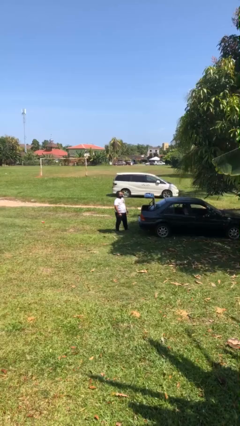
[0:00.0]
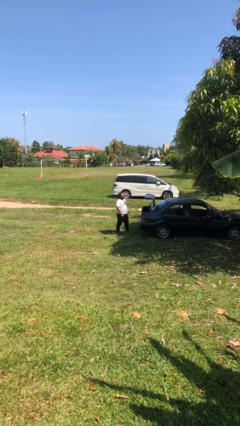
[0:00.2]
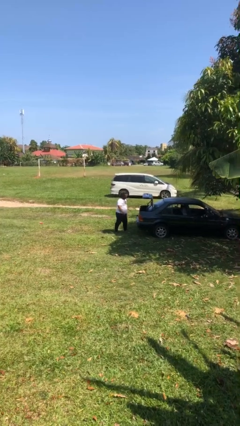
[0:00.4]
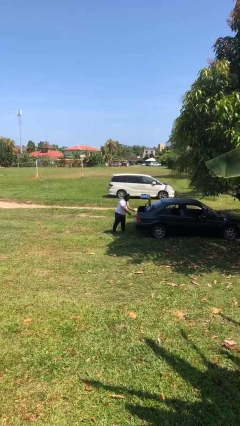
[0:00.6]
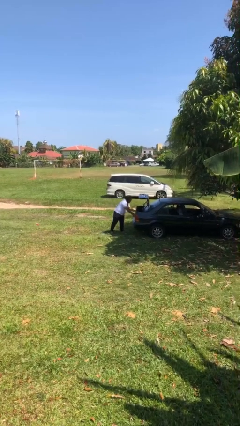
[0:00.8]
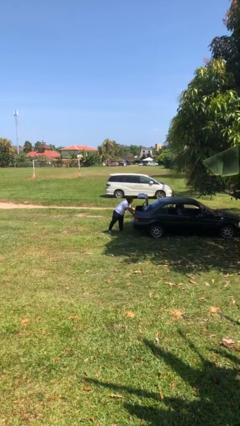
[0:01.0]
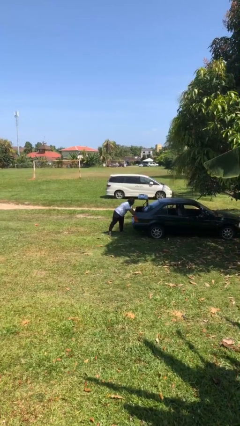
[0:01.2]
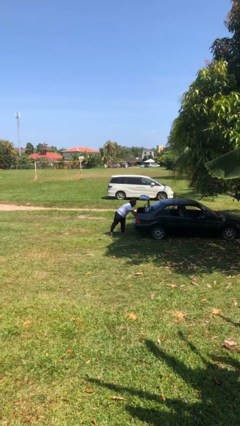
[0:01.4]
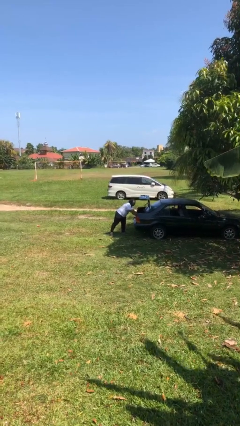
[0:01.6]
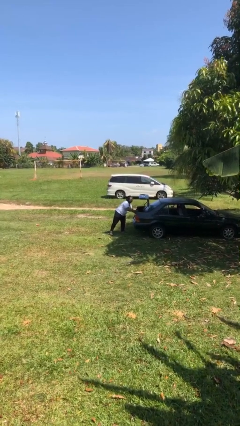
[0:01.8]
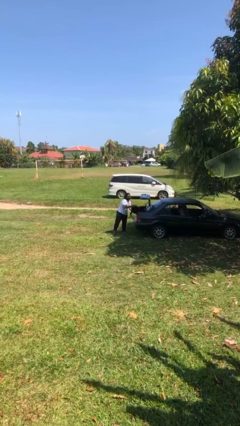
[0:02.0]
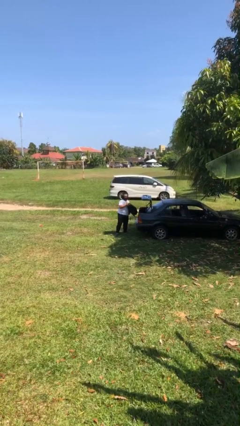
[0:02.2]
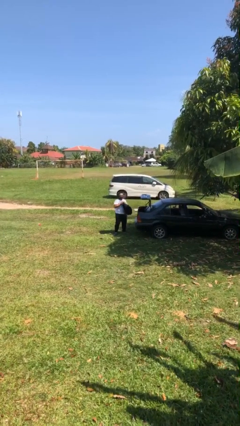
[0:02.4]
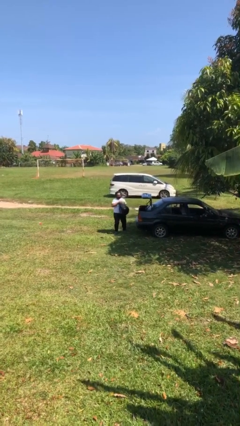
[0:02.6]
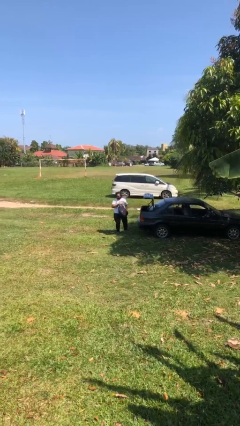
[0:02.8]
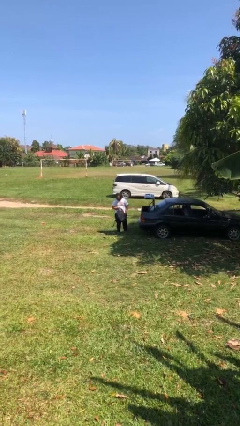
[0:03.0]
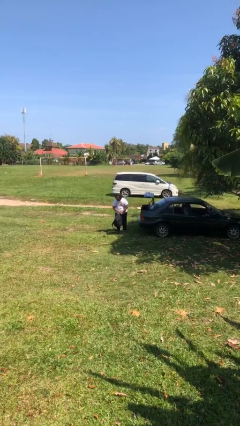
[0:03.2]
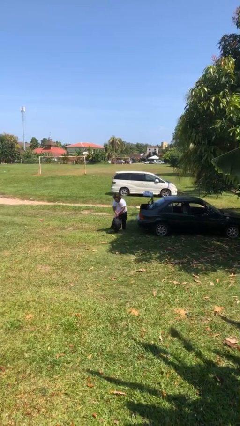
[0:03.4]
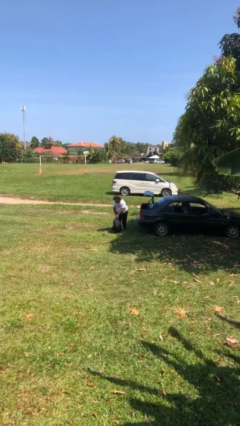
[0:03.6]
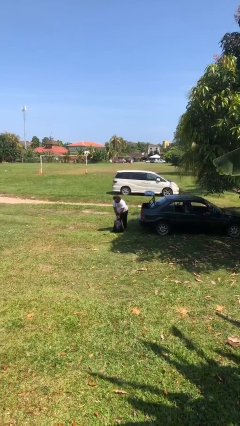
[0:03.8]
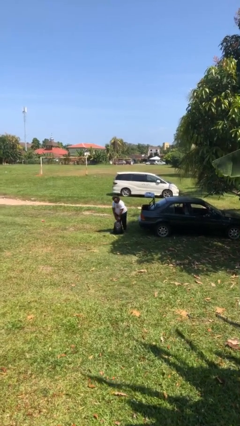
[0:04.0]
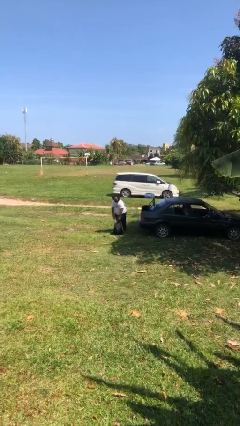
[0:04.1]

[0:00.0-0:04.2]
person unloads car

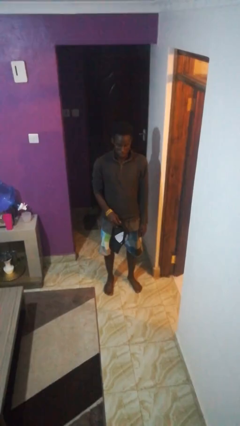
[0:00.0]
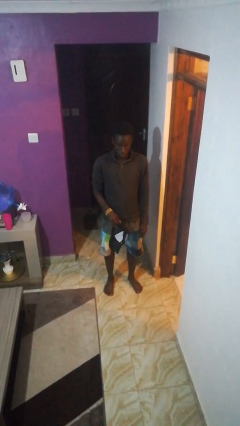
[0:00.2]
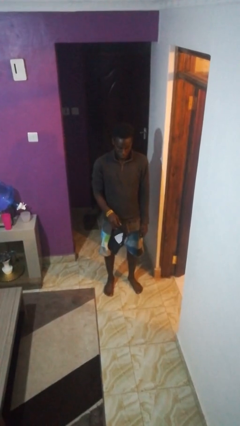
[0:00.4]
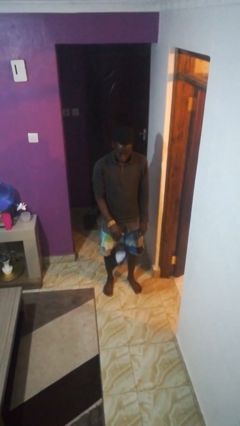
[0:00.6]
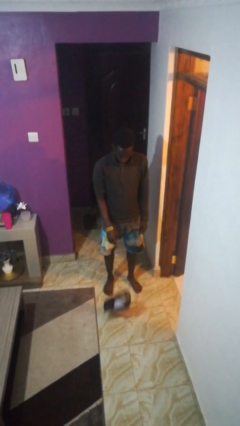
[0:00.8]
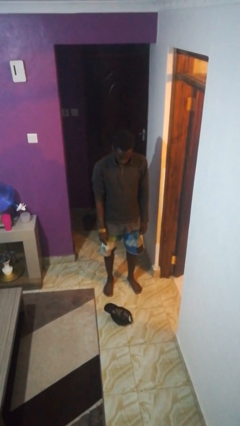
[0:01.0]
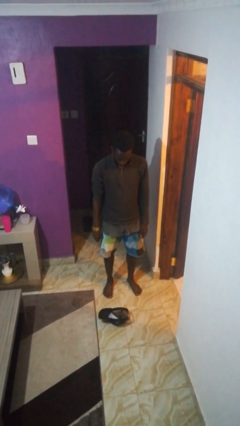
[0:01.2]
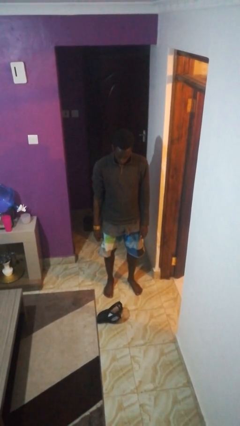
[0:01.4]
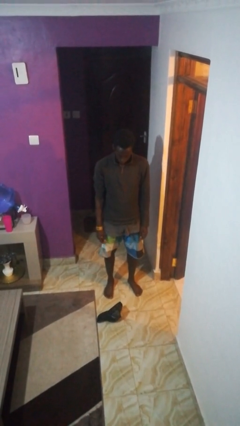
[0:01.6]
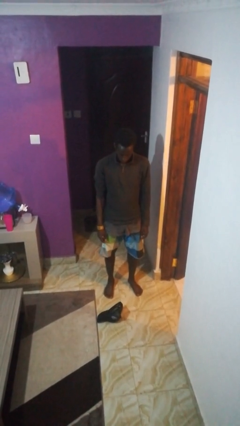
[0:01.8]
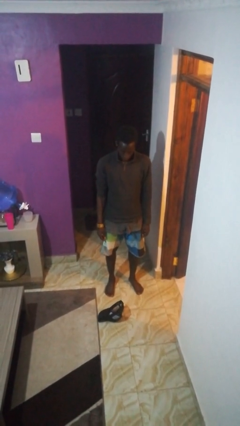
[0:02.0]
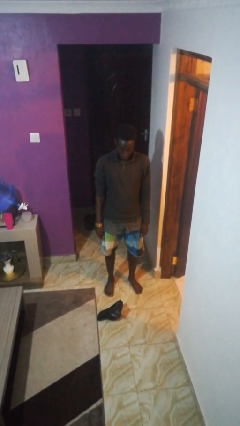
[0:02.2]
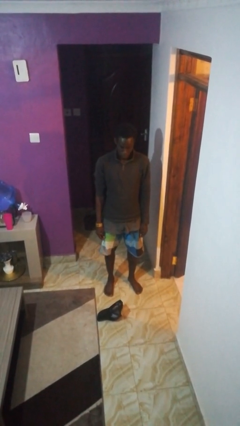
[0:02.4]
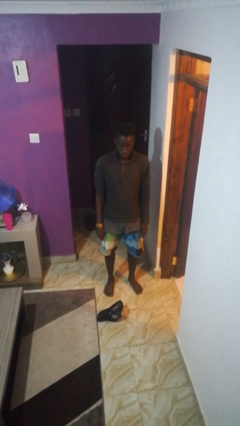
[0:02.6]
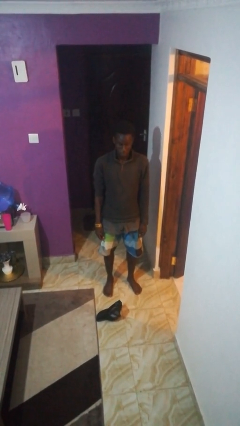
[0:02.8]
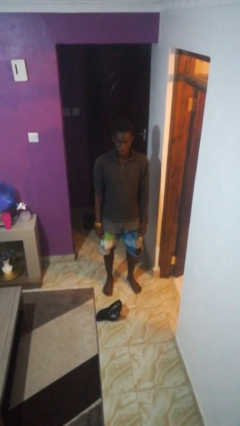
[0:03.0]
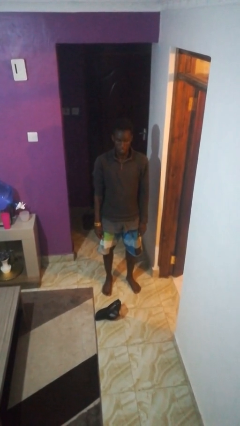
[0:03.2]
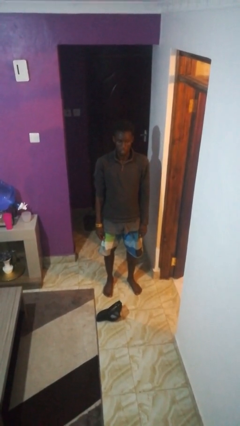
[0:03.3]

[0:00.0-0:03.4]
person drops object

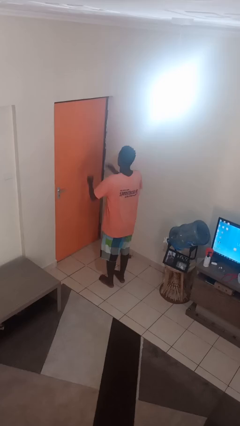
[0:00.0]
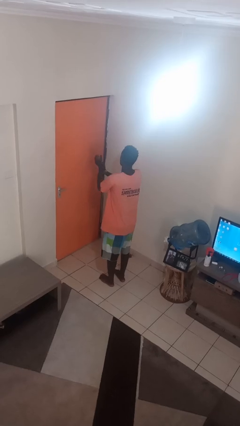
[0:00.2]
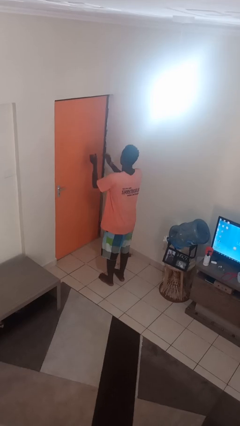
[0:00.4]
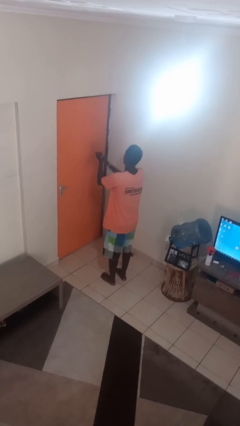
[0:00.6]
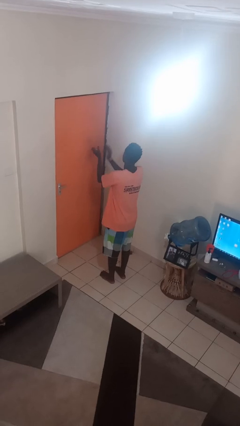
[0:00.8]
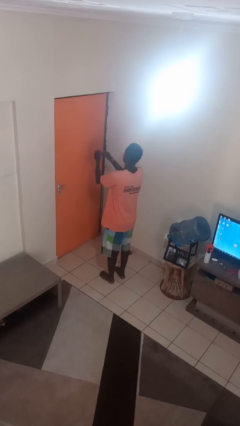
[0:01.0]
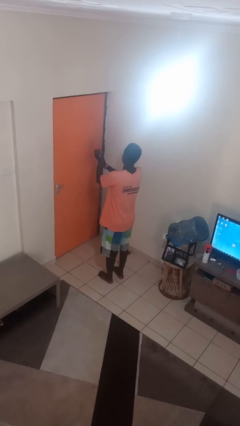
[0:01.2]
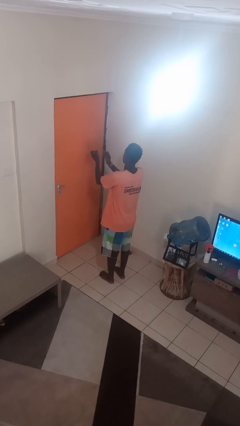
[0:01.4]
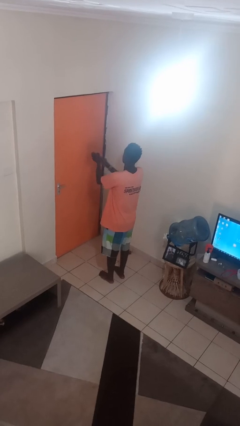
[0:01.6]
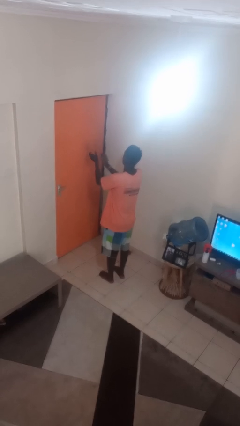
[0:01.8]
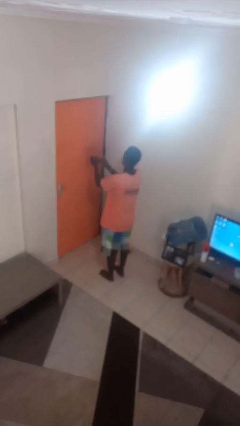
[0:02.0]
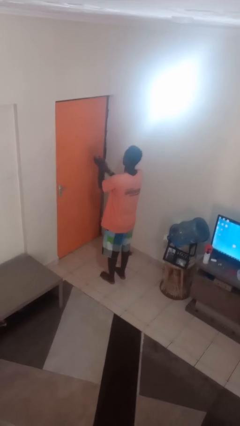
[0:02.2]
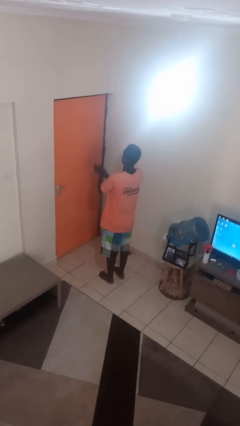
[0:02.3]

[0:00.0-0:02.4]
person claps hands

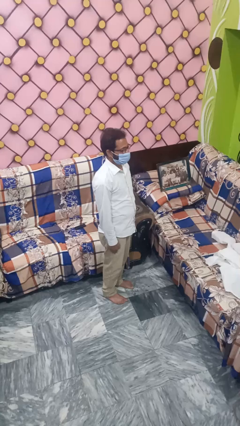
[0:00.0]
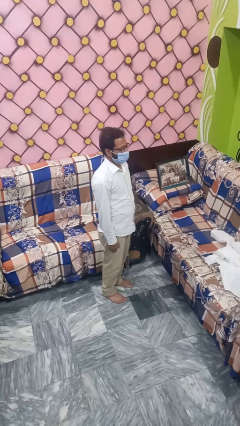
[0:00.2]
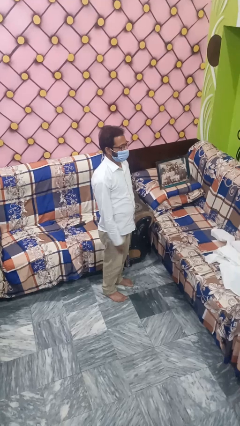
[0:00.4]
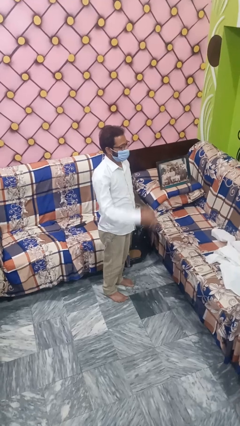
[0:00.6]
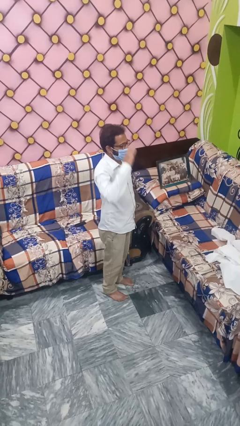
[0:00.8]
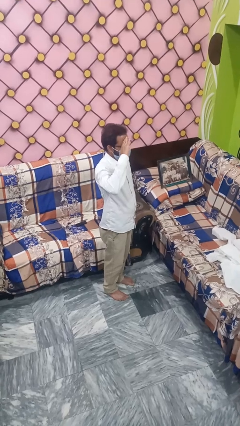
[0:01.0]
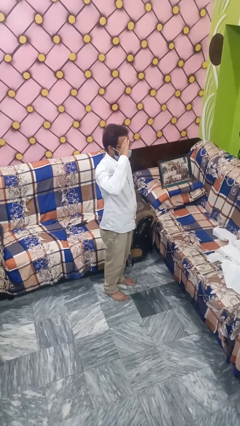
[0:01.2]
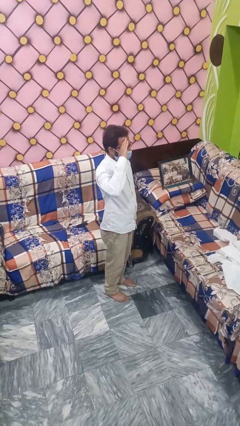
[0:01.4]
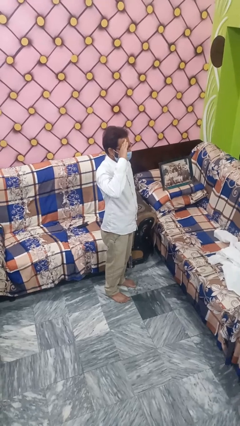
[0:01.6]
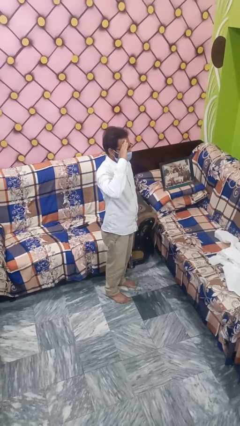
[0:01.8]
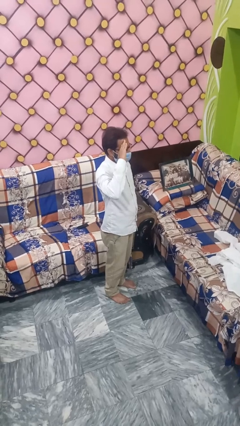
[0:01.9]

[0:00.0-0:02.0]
person salutes

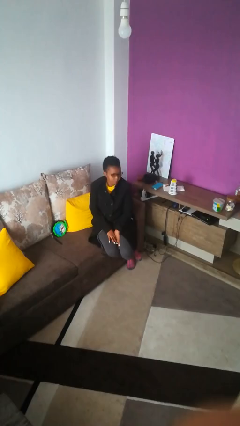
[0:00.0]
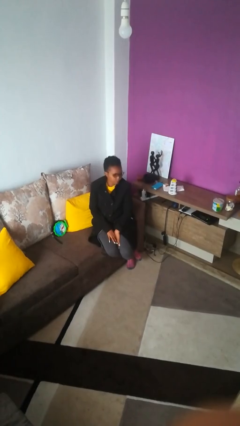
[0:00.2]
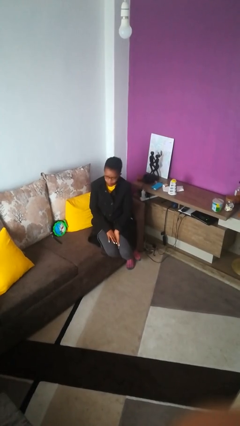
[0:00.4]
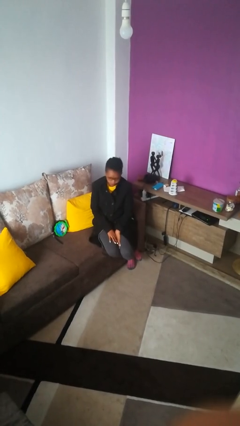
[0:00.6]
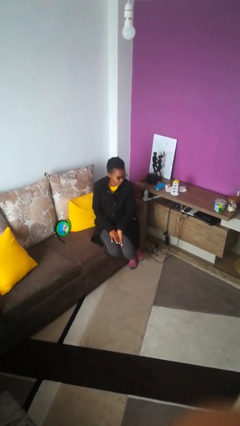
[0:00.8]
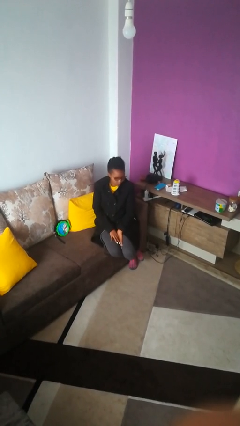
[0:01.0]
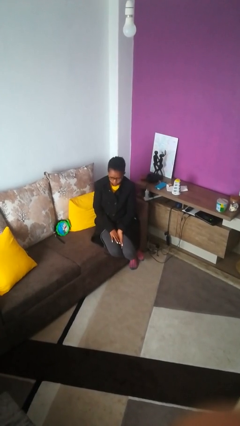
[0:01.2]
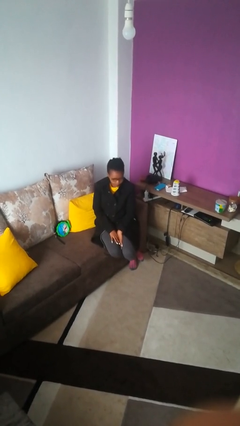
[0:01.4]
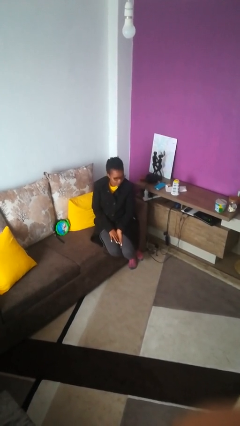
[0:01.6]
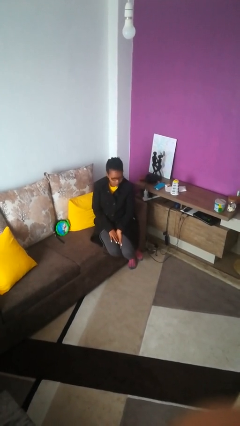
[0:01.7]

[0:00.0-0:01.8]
person shakes head

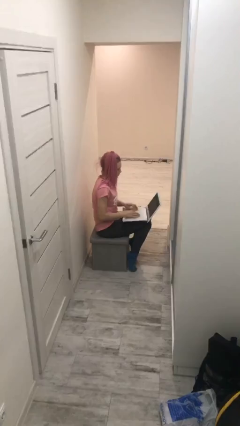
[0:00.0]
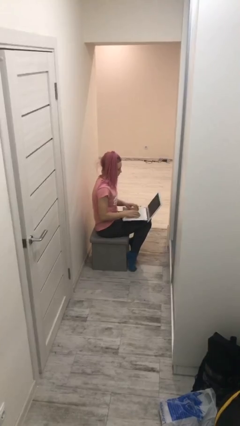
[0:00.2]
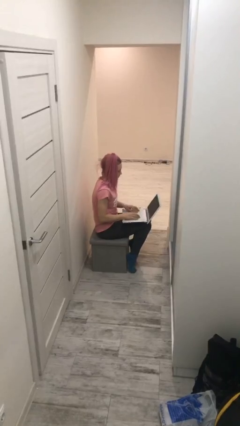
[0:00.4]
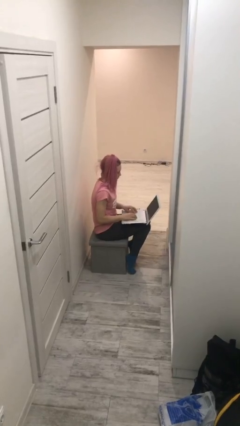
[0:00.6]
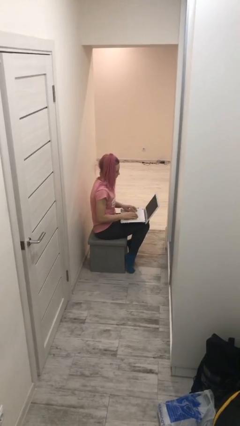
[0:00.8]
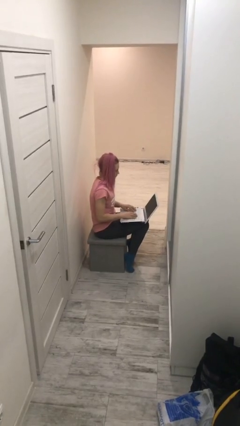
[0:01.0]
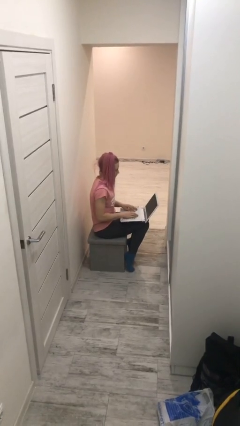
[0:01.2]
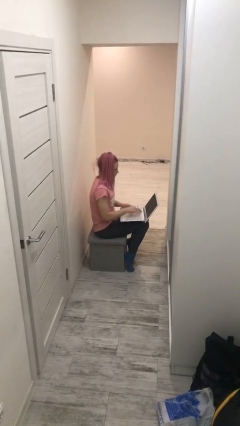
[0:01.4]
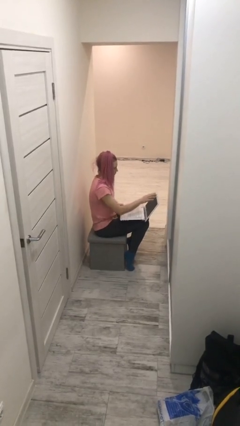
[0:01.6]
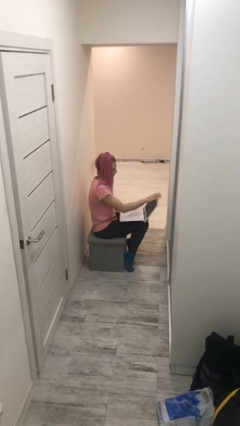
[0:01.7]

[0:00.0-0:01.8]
person interacts with laptop

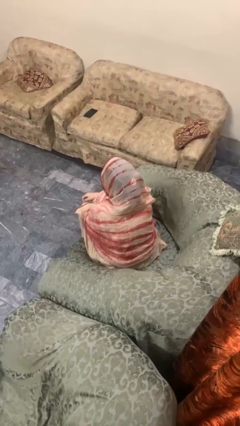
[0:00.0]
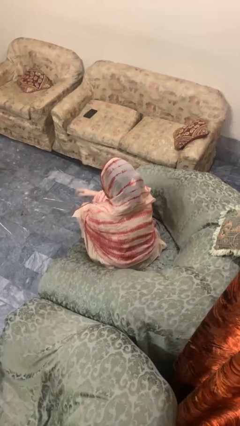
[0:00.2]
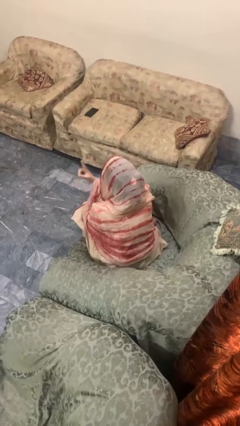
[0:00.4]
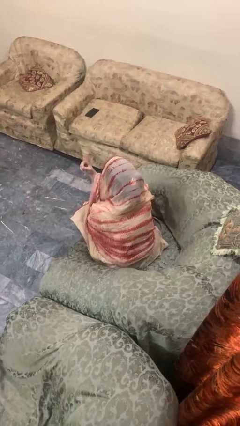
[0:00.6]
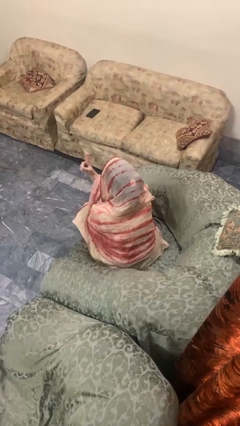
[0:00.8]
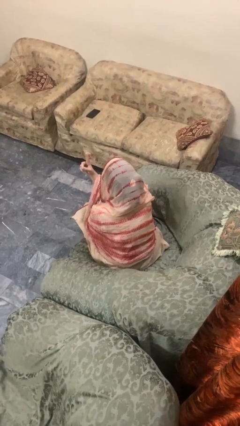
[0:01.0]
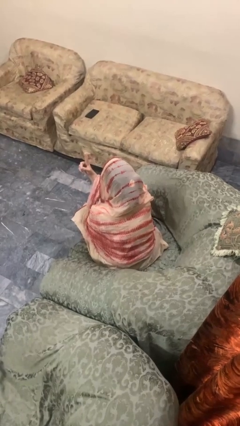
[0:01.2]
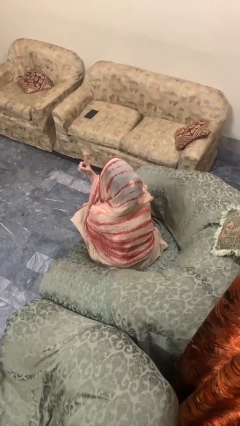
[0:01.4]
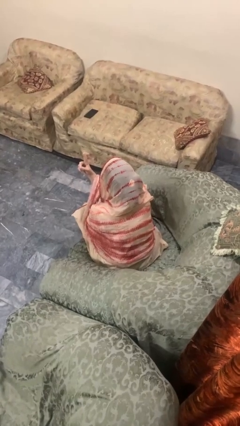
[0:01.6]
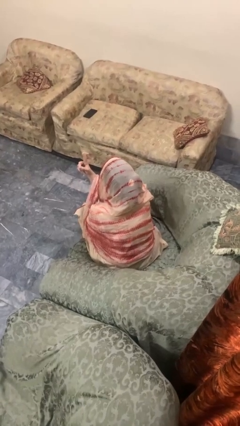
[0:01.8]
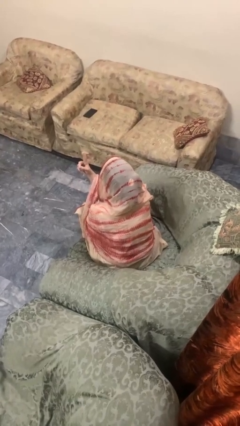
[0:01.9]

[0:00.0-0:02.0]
person gestures number one
